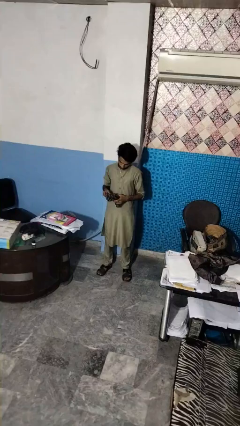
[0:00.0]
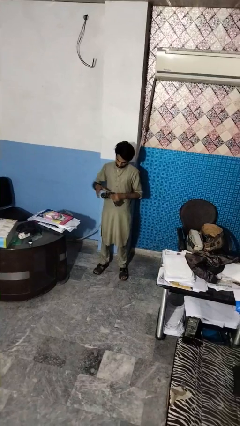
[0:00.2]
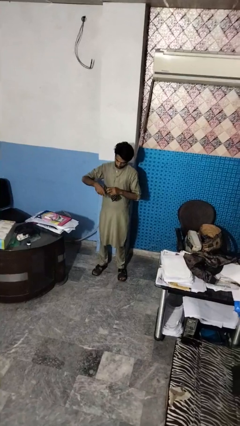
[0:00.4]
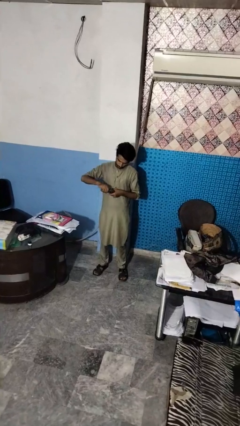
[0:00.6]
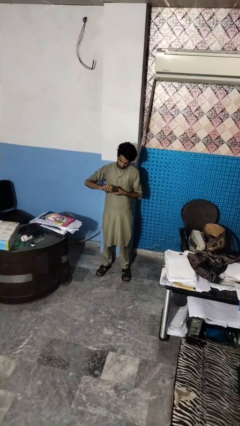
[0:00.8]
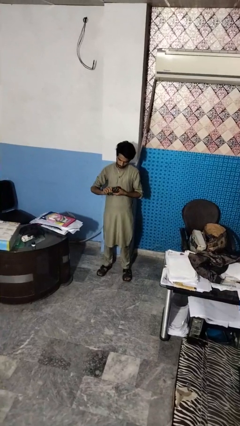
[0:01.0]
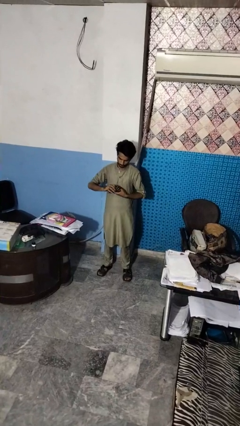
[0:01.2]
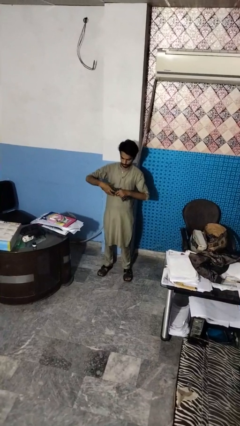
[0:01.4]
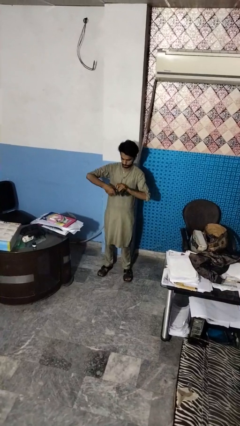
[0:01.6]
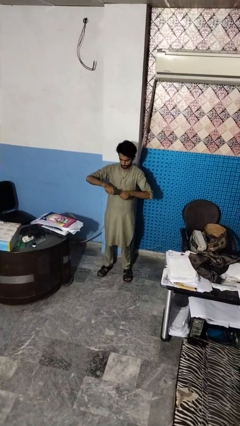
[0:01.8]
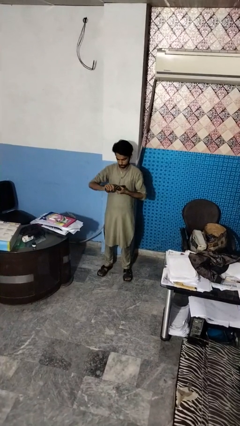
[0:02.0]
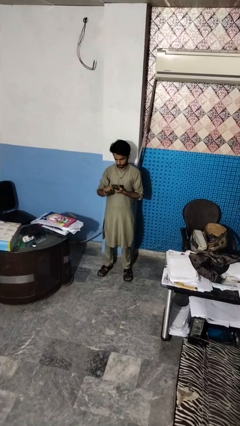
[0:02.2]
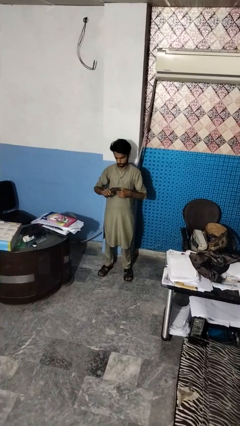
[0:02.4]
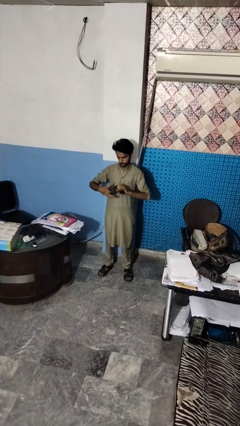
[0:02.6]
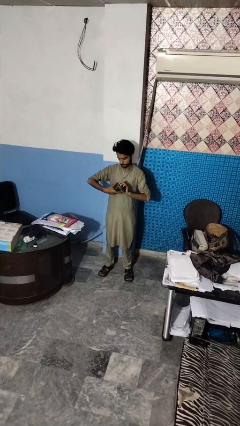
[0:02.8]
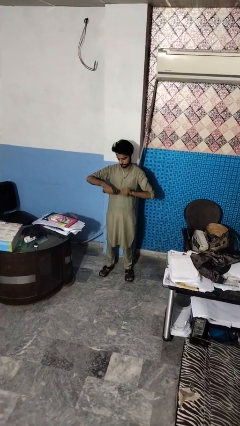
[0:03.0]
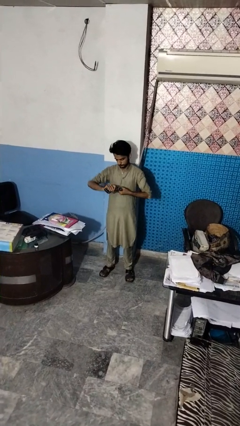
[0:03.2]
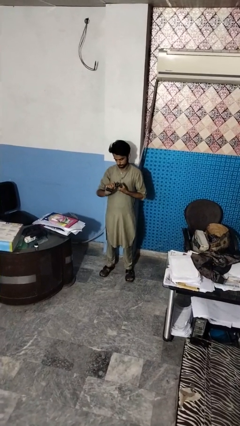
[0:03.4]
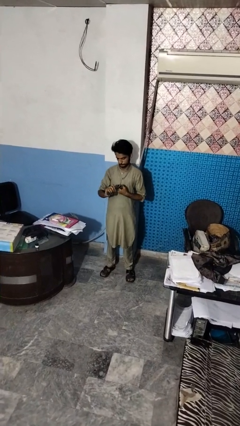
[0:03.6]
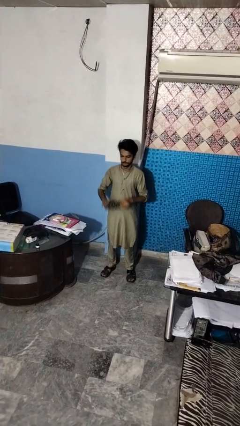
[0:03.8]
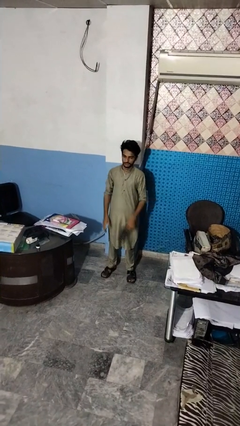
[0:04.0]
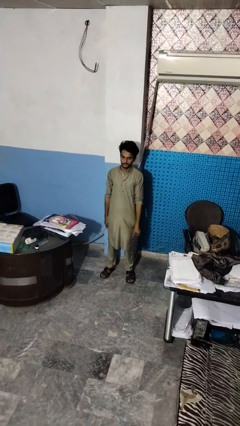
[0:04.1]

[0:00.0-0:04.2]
person squeezes object

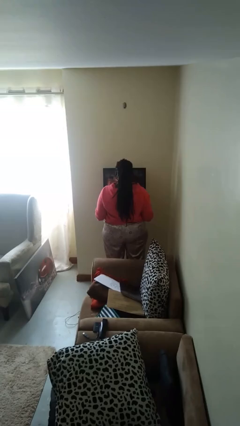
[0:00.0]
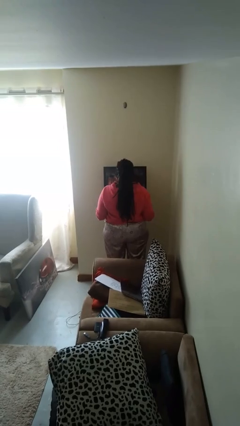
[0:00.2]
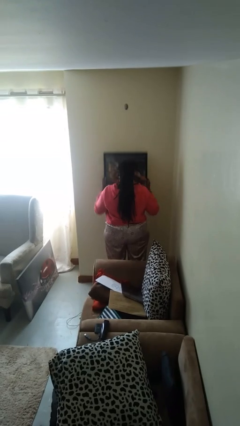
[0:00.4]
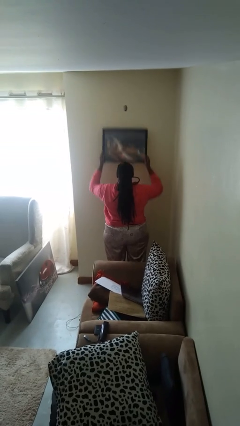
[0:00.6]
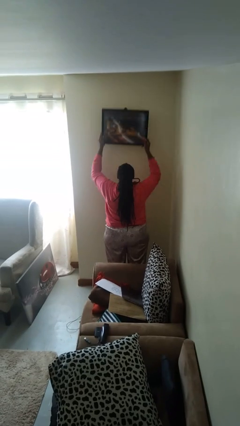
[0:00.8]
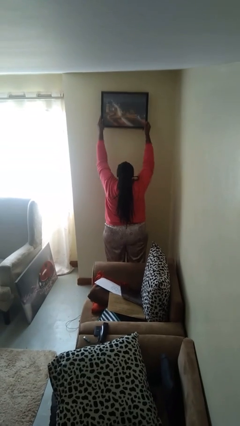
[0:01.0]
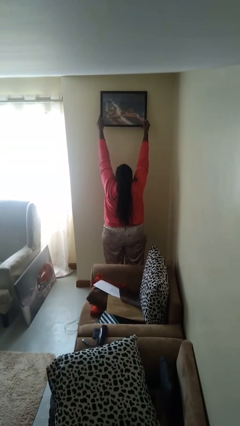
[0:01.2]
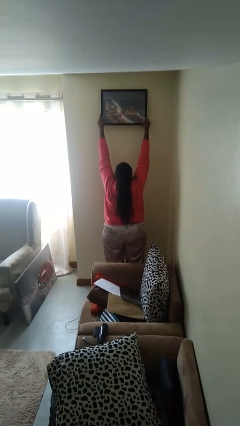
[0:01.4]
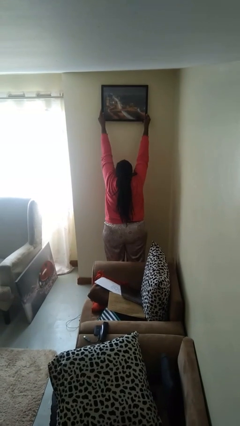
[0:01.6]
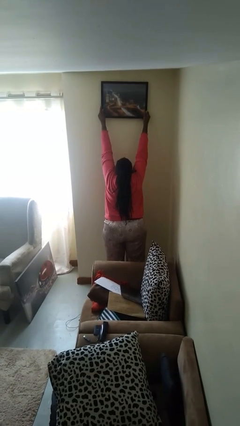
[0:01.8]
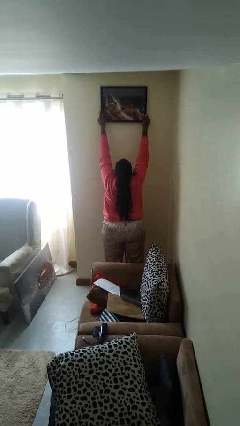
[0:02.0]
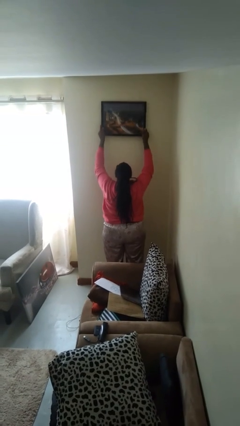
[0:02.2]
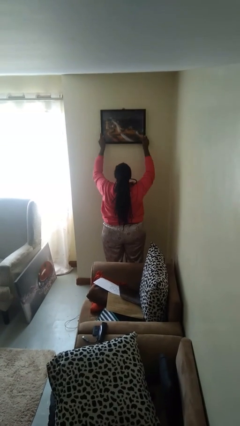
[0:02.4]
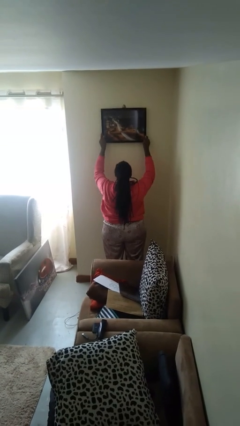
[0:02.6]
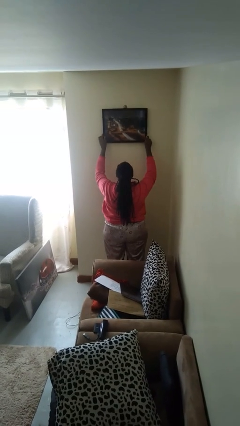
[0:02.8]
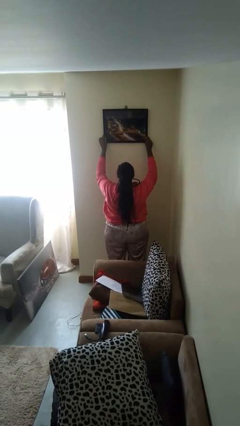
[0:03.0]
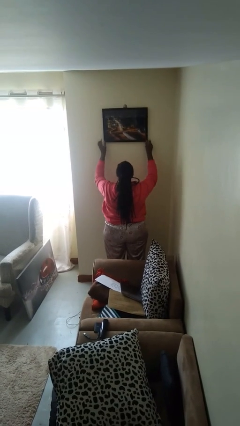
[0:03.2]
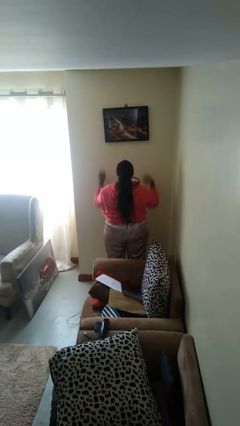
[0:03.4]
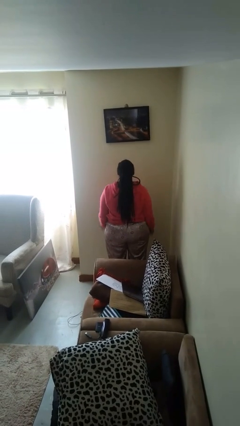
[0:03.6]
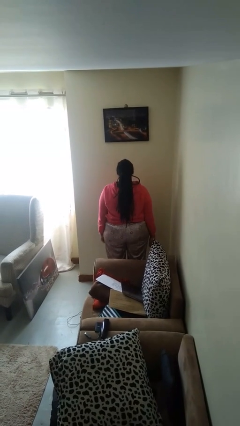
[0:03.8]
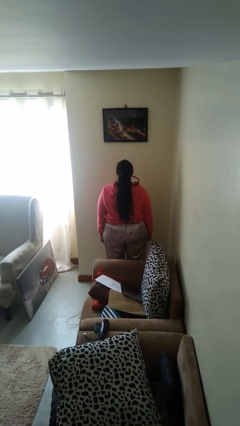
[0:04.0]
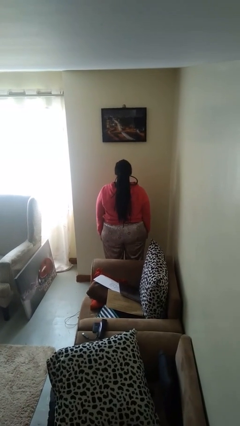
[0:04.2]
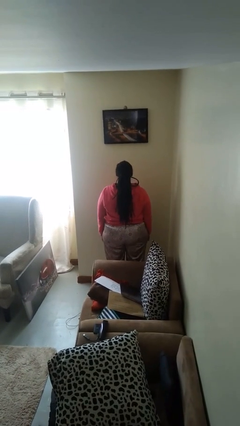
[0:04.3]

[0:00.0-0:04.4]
person puts up picture frame

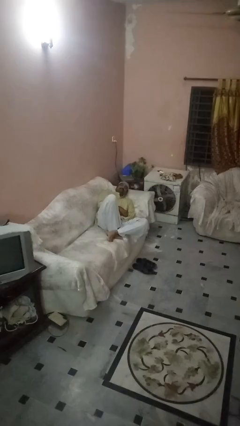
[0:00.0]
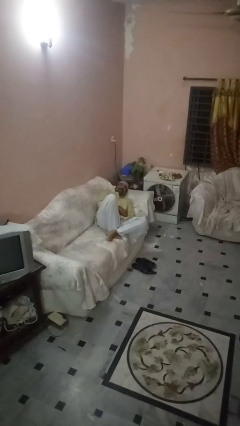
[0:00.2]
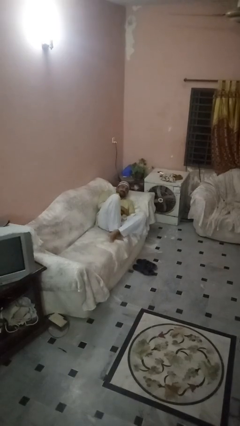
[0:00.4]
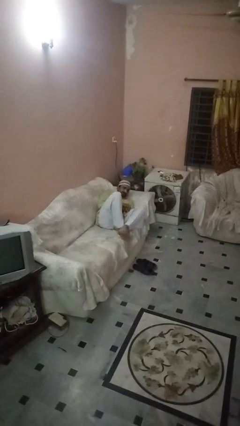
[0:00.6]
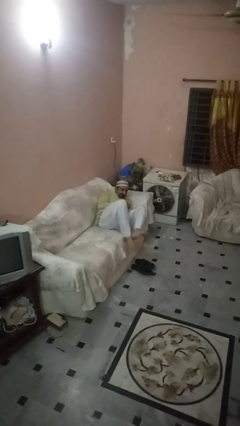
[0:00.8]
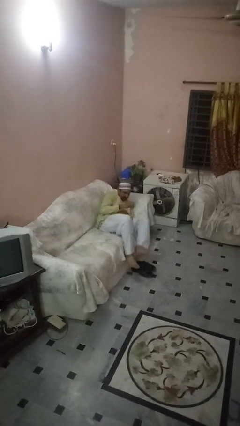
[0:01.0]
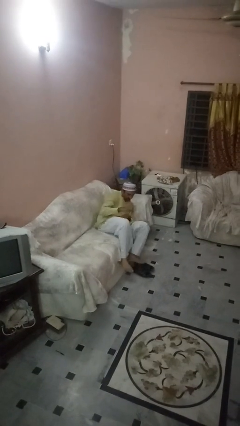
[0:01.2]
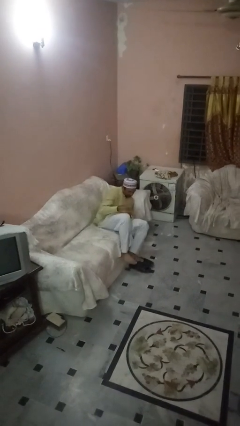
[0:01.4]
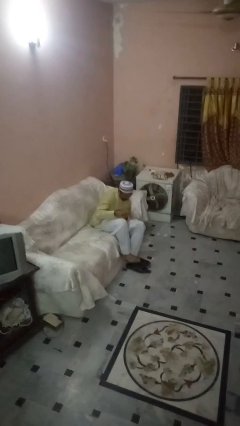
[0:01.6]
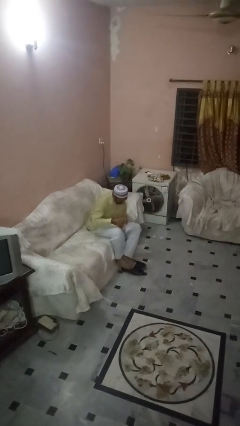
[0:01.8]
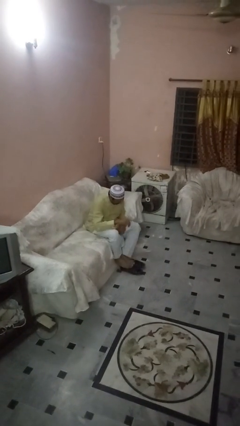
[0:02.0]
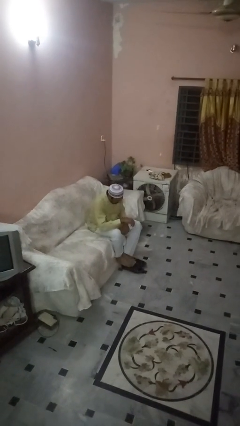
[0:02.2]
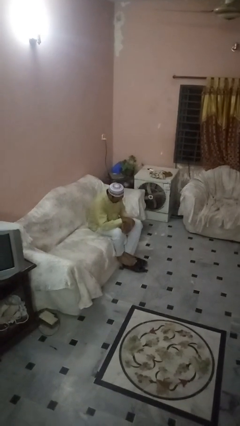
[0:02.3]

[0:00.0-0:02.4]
person stands up

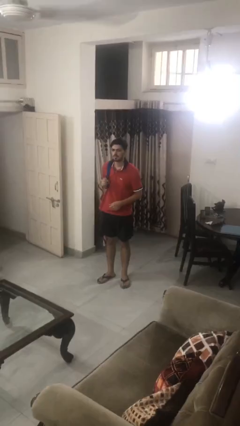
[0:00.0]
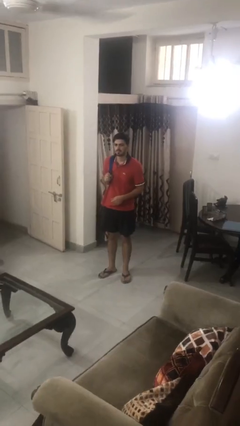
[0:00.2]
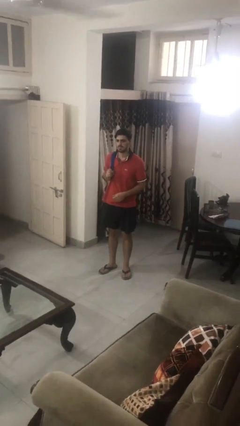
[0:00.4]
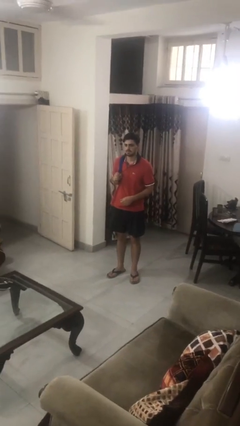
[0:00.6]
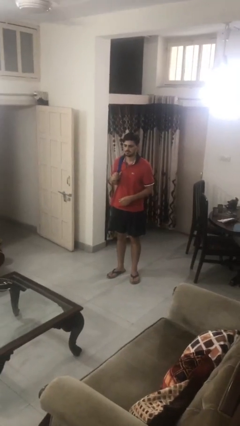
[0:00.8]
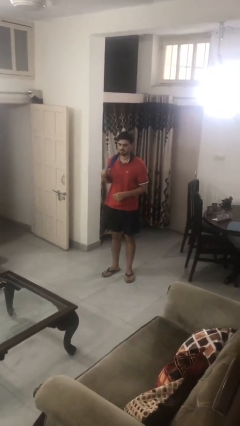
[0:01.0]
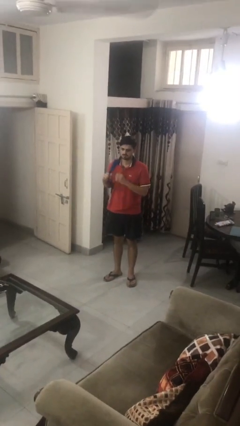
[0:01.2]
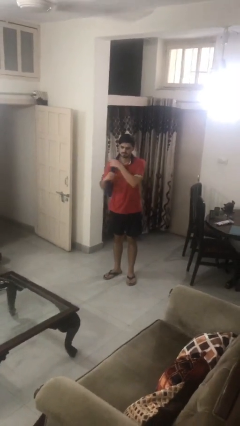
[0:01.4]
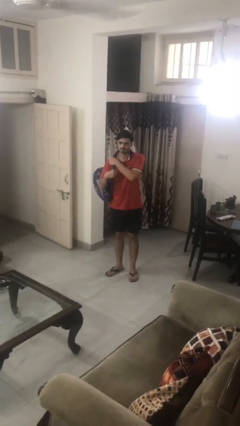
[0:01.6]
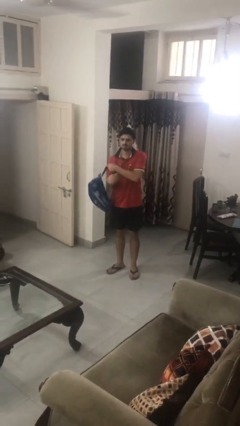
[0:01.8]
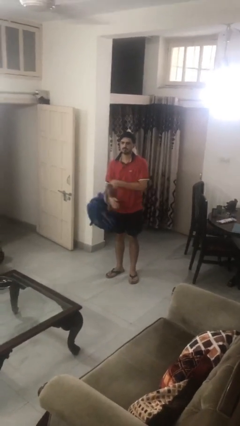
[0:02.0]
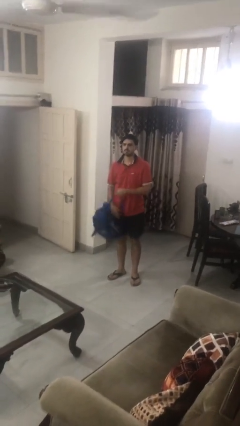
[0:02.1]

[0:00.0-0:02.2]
person takes off backpack

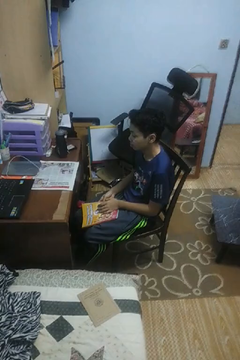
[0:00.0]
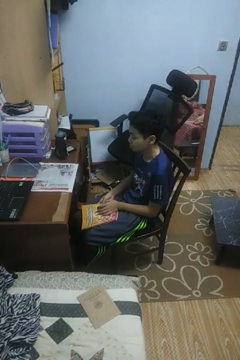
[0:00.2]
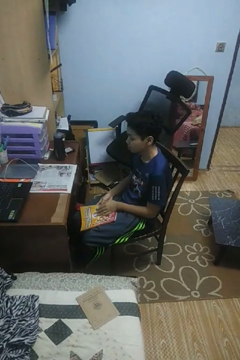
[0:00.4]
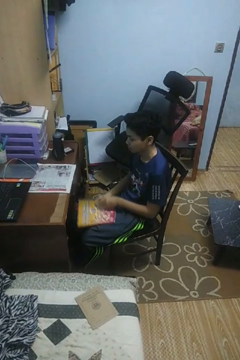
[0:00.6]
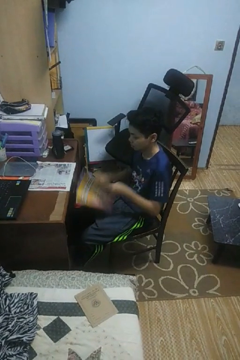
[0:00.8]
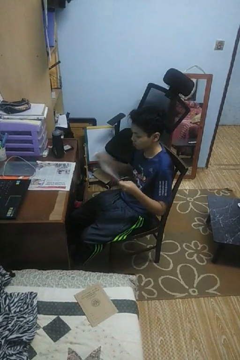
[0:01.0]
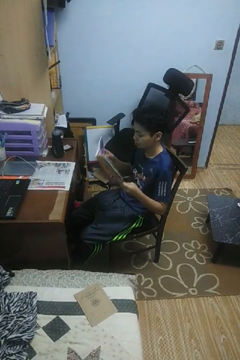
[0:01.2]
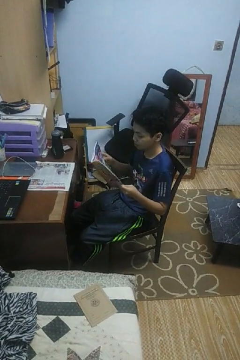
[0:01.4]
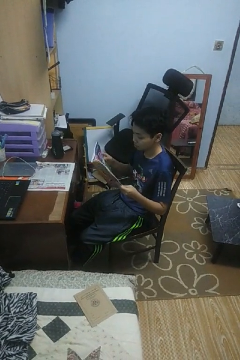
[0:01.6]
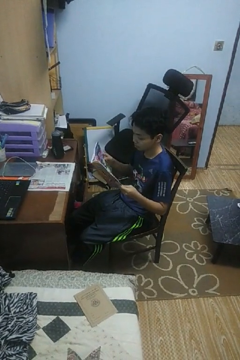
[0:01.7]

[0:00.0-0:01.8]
person reads magazine

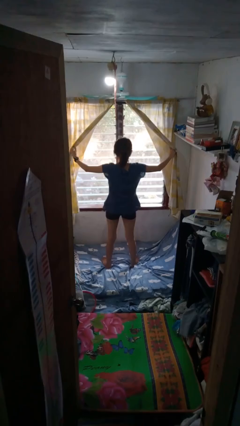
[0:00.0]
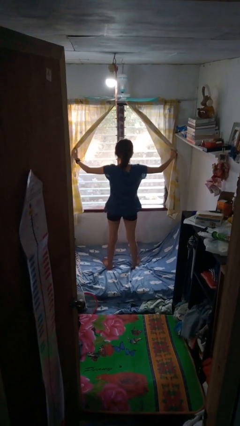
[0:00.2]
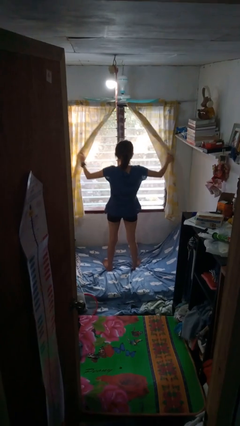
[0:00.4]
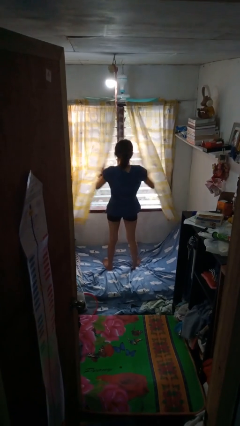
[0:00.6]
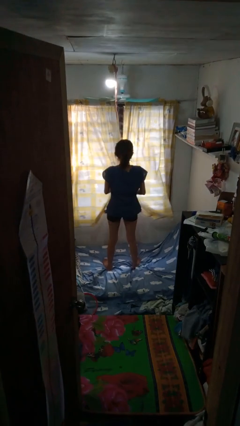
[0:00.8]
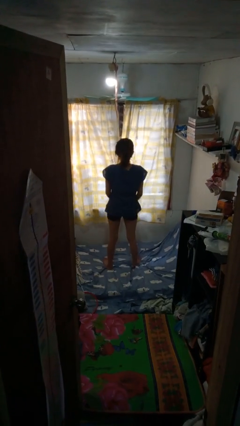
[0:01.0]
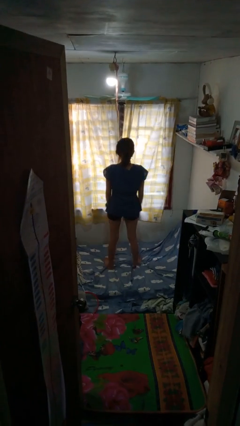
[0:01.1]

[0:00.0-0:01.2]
person closes curtains

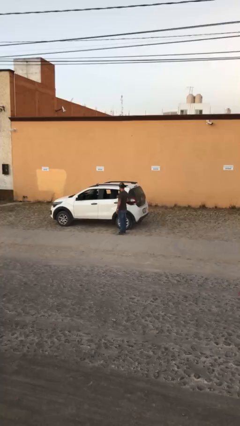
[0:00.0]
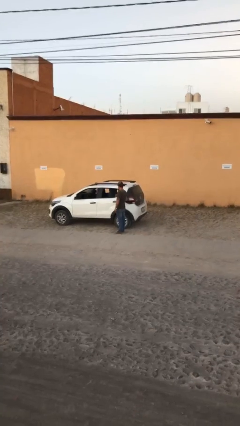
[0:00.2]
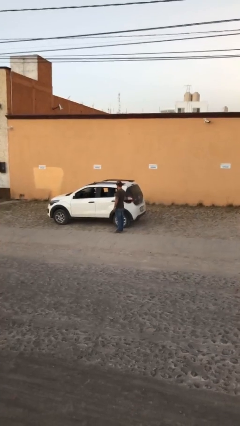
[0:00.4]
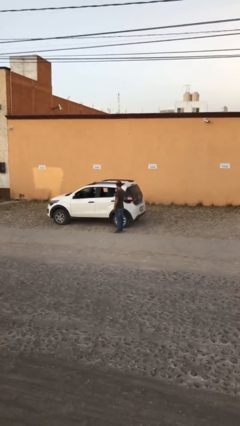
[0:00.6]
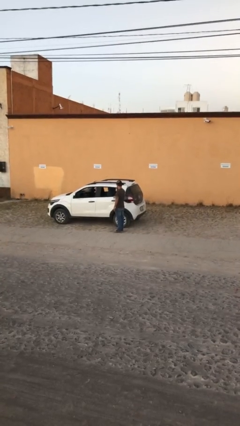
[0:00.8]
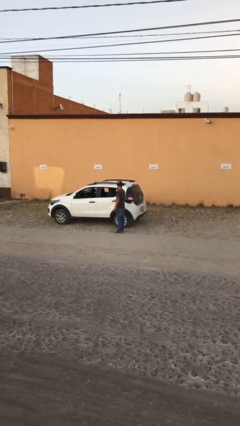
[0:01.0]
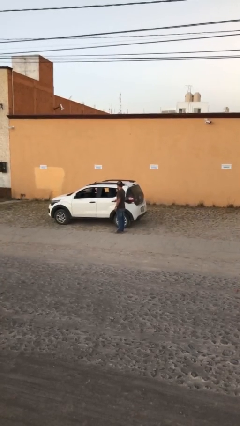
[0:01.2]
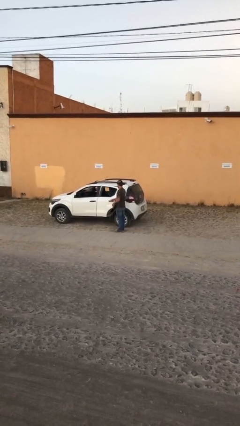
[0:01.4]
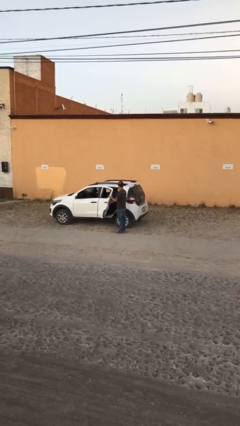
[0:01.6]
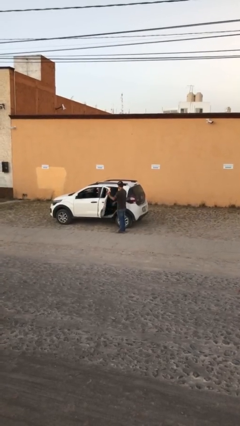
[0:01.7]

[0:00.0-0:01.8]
person opens car door
